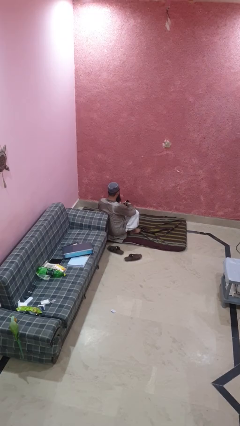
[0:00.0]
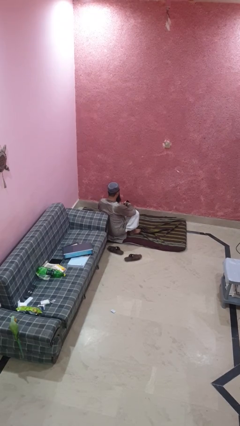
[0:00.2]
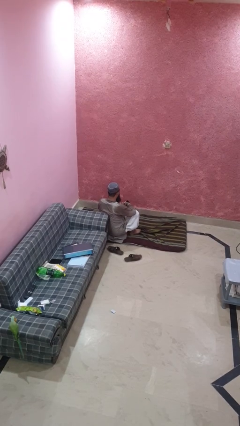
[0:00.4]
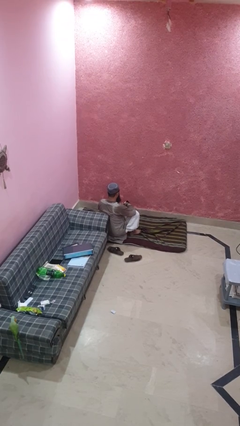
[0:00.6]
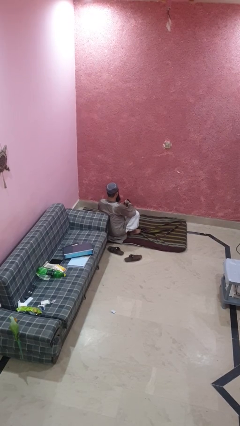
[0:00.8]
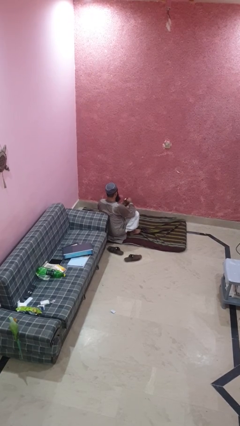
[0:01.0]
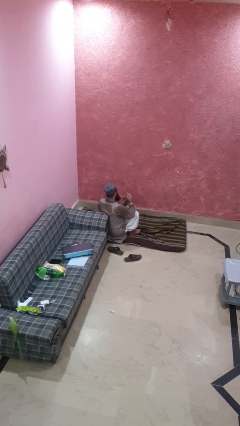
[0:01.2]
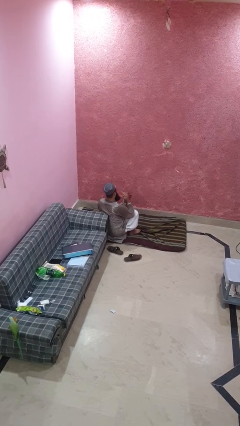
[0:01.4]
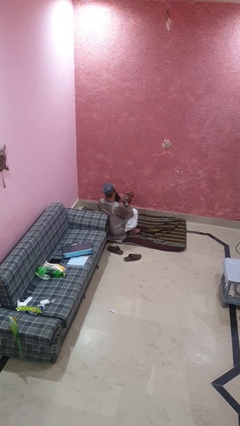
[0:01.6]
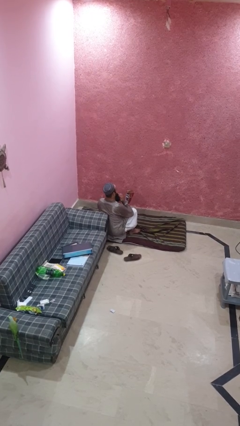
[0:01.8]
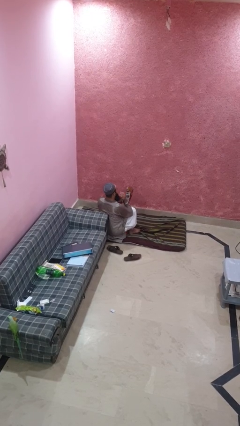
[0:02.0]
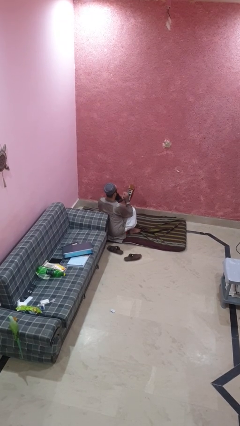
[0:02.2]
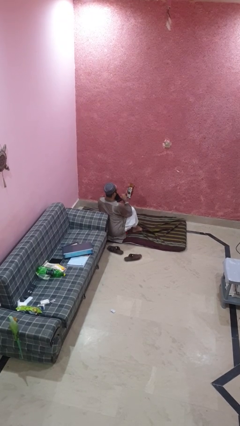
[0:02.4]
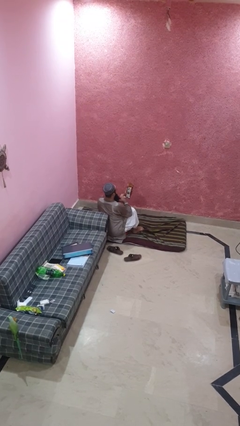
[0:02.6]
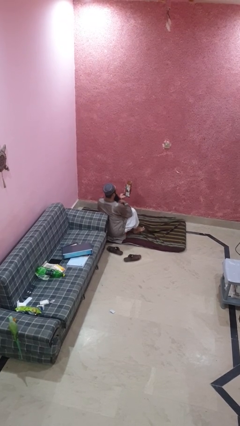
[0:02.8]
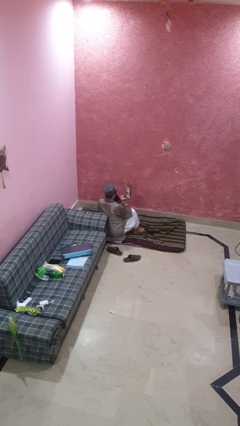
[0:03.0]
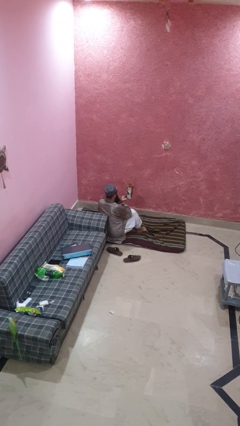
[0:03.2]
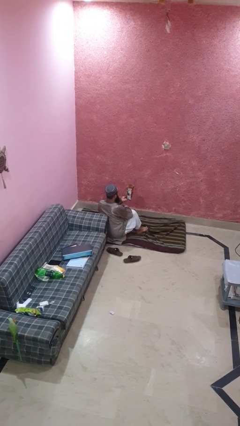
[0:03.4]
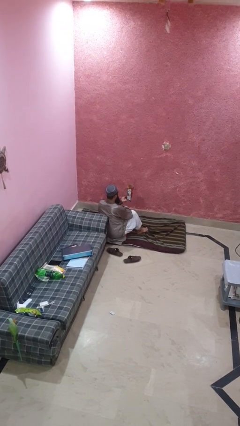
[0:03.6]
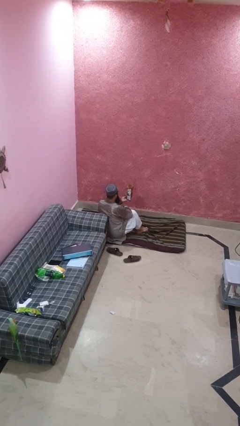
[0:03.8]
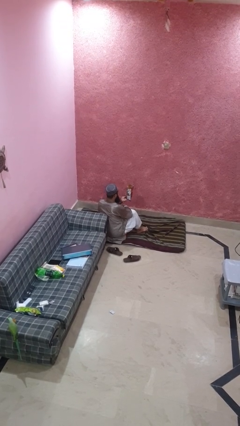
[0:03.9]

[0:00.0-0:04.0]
person eats snack from bag

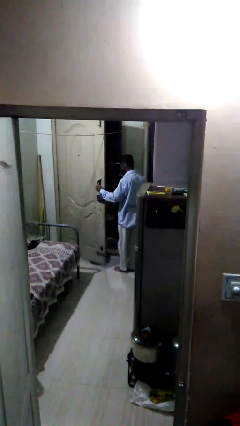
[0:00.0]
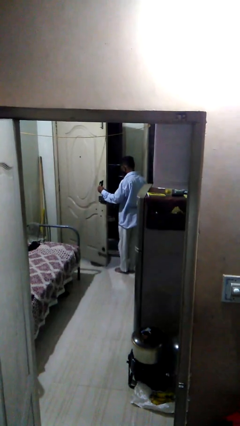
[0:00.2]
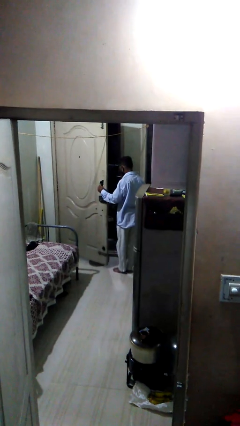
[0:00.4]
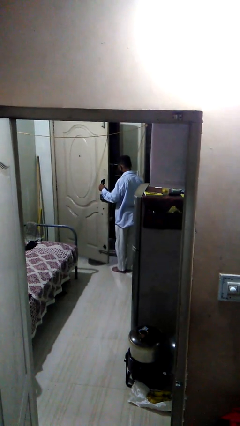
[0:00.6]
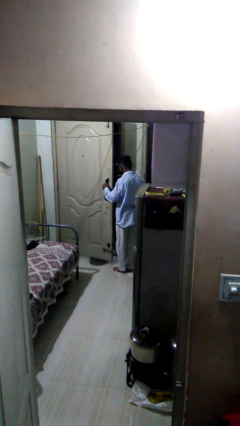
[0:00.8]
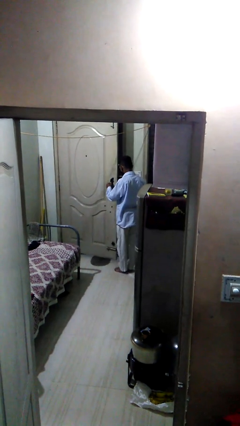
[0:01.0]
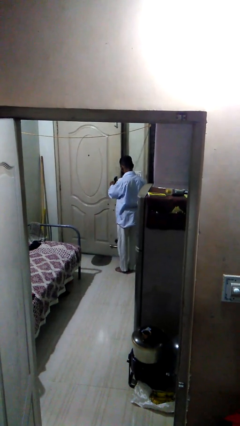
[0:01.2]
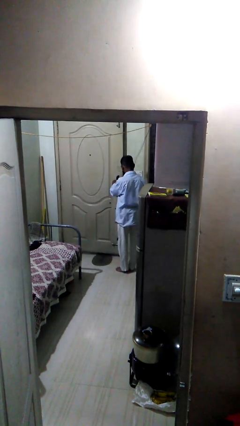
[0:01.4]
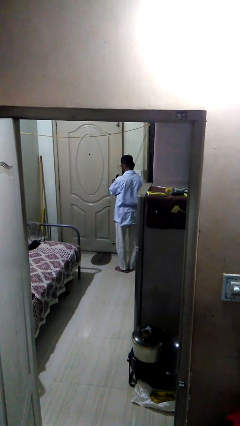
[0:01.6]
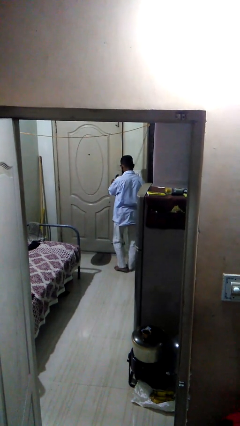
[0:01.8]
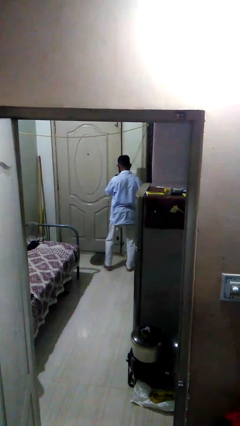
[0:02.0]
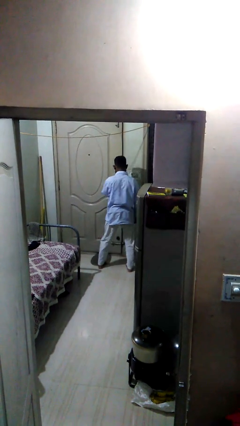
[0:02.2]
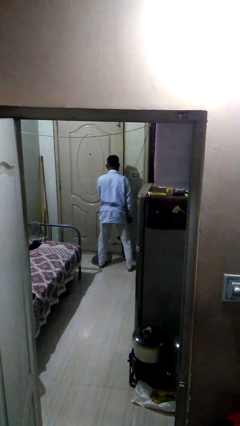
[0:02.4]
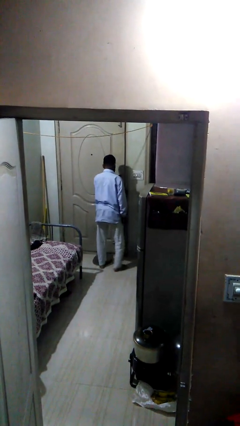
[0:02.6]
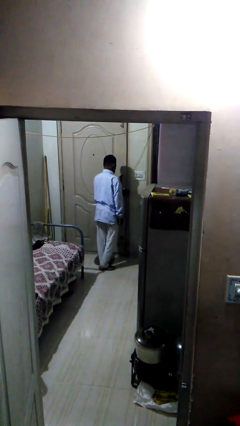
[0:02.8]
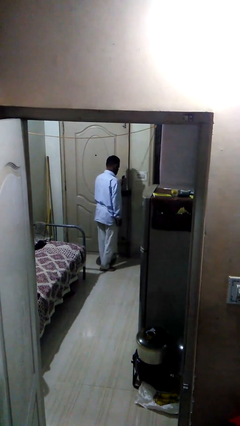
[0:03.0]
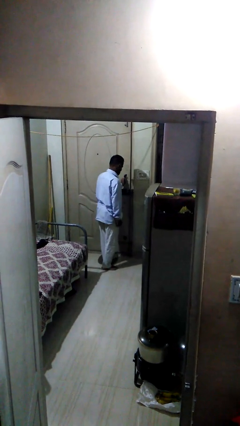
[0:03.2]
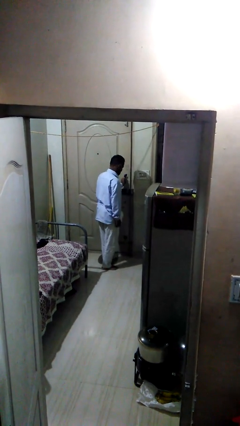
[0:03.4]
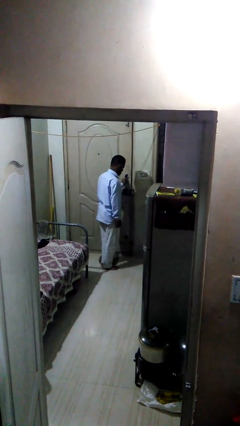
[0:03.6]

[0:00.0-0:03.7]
person closes facility door

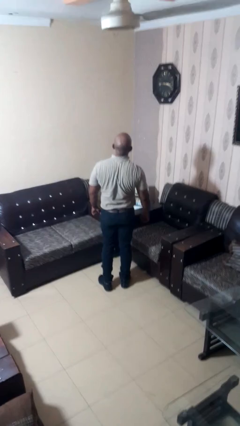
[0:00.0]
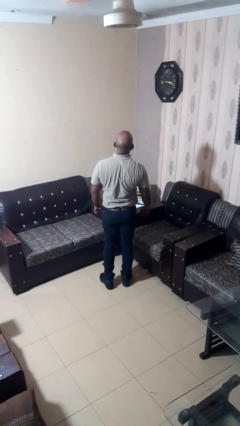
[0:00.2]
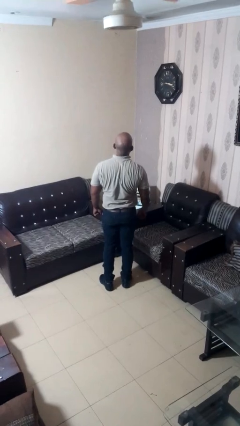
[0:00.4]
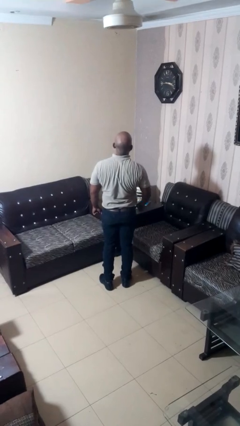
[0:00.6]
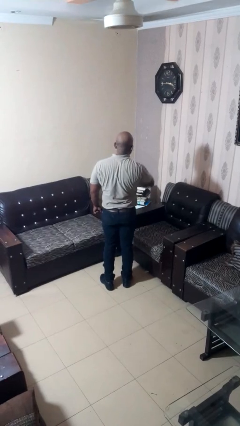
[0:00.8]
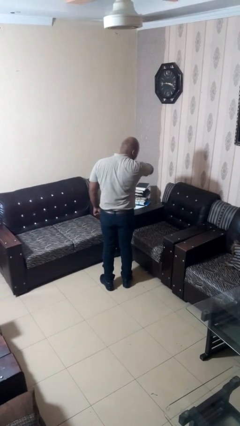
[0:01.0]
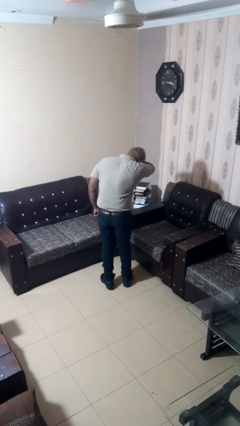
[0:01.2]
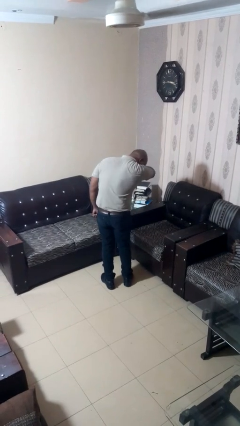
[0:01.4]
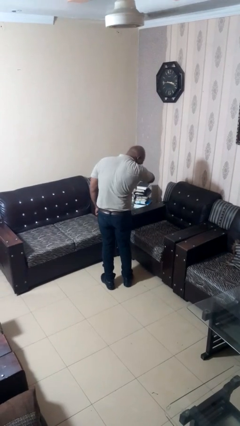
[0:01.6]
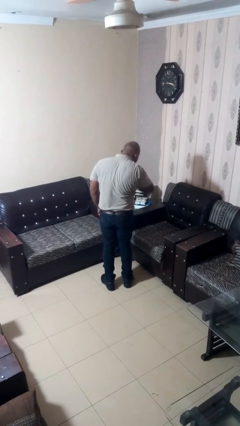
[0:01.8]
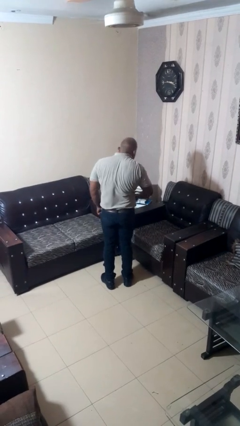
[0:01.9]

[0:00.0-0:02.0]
person sneezes into arm

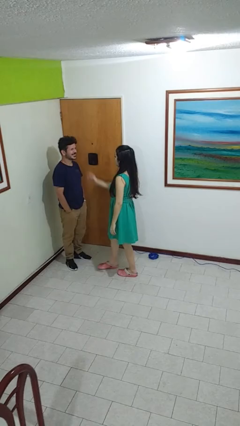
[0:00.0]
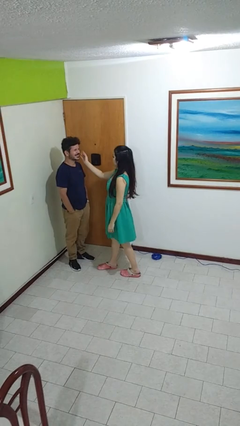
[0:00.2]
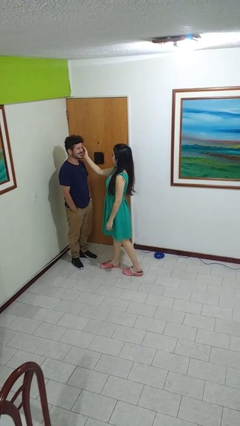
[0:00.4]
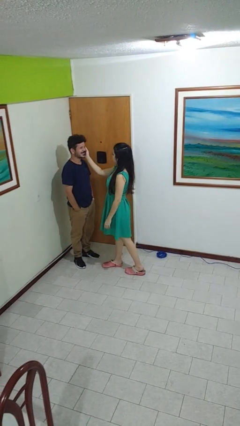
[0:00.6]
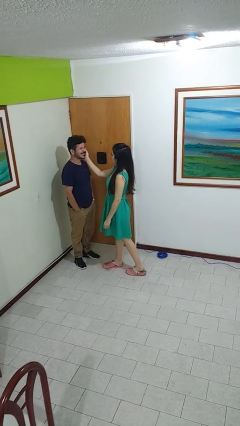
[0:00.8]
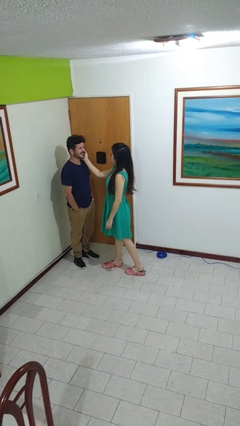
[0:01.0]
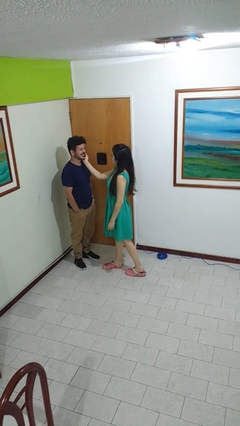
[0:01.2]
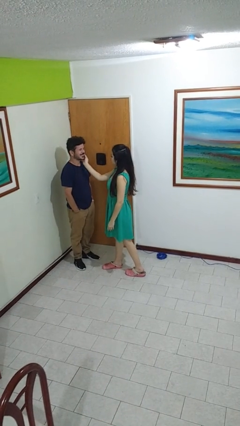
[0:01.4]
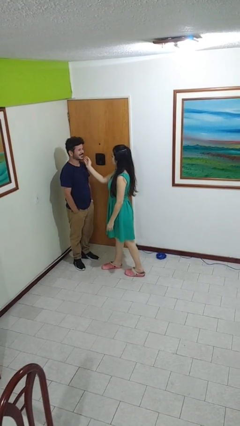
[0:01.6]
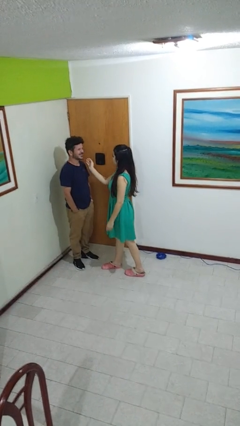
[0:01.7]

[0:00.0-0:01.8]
person touches face of person

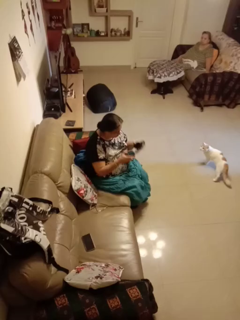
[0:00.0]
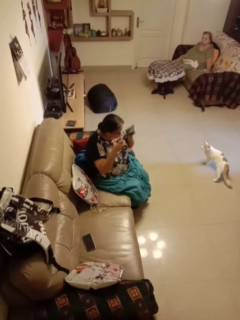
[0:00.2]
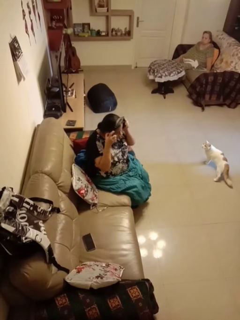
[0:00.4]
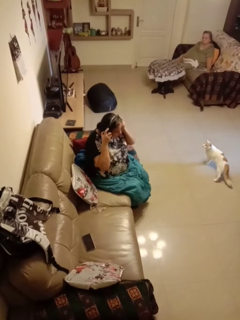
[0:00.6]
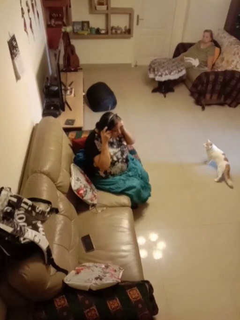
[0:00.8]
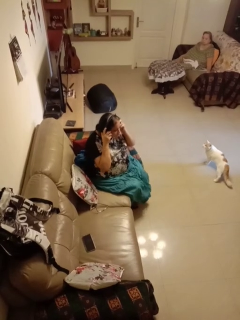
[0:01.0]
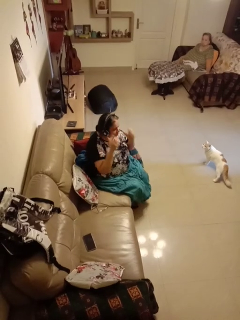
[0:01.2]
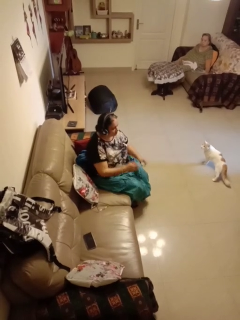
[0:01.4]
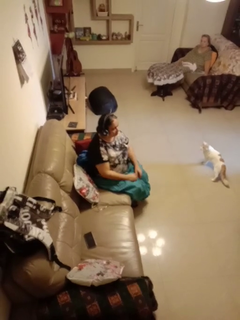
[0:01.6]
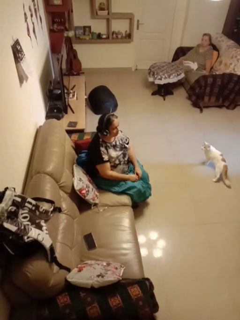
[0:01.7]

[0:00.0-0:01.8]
person puts on headphones

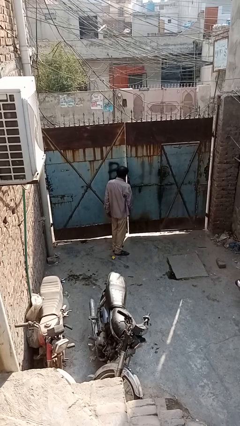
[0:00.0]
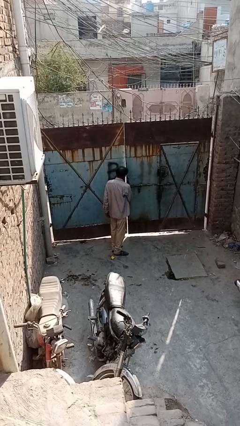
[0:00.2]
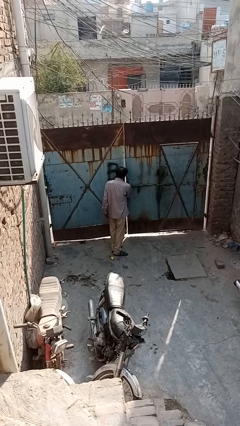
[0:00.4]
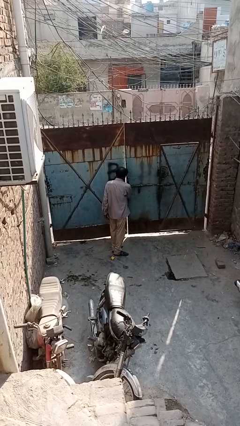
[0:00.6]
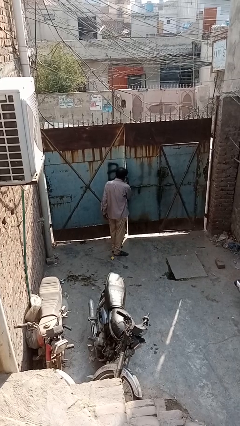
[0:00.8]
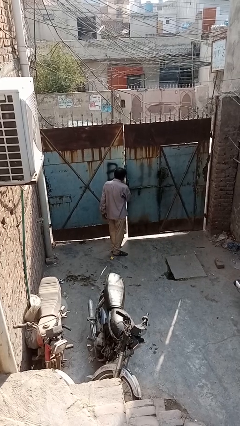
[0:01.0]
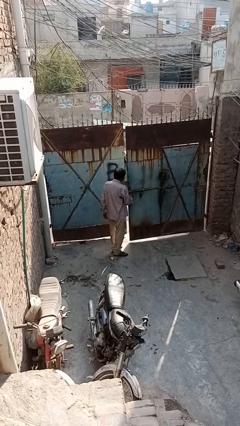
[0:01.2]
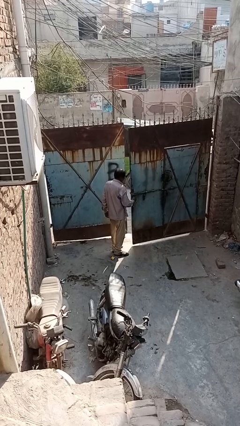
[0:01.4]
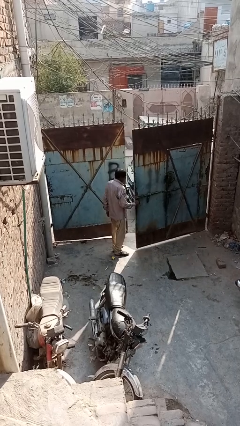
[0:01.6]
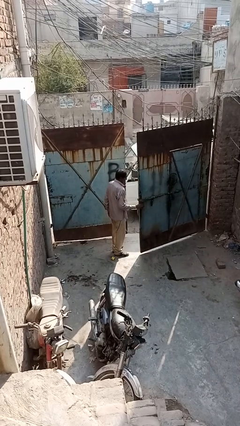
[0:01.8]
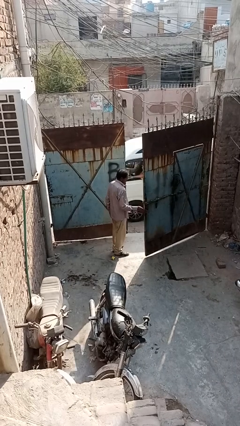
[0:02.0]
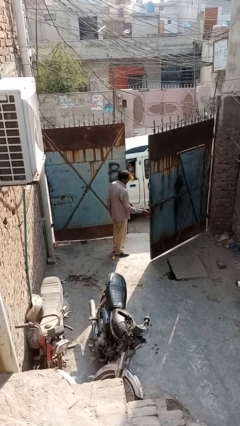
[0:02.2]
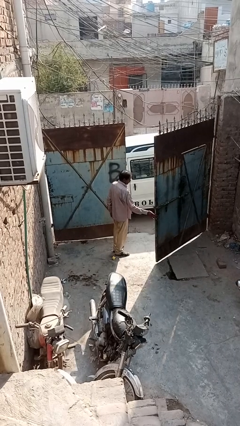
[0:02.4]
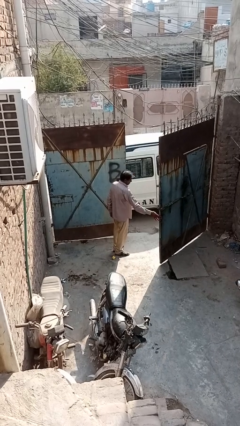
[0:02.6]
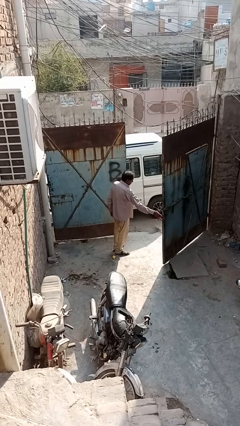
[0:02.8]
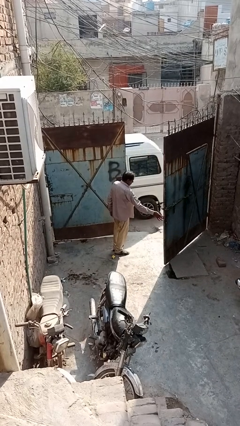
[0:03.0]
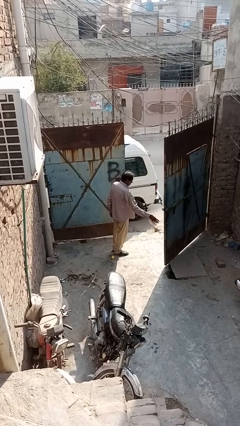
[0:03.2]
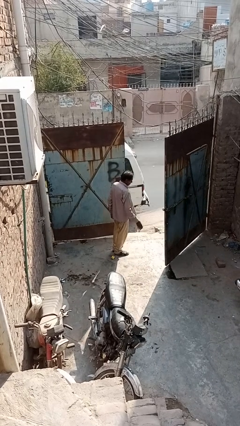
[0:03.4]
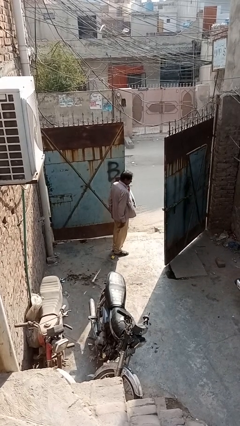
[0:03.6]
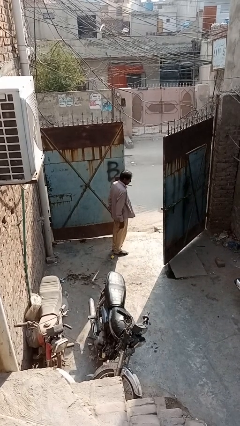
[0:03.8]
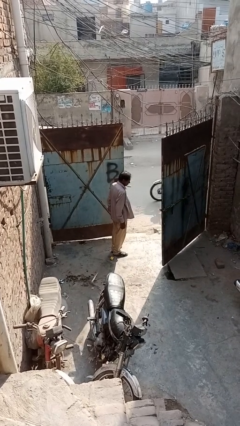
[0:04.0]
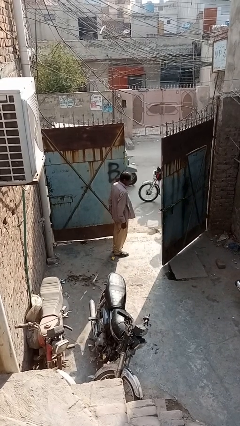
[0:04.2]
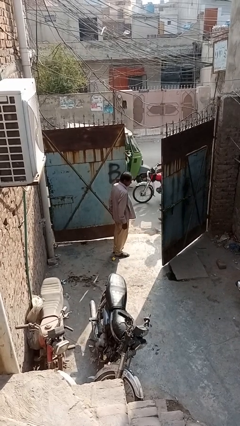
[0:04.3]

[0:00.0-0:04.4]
person opens gate

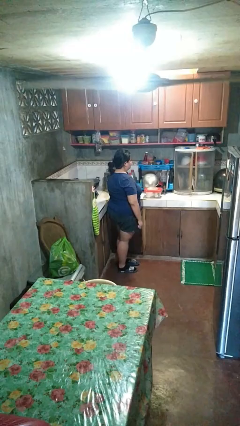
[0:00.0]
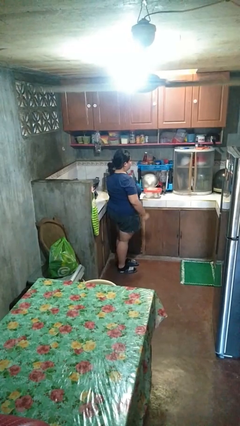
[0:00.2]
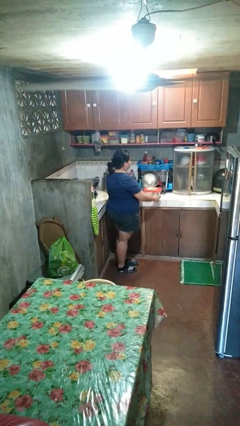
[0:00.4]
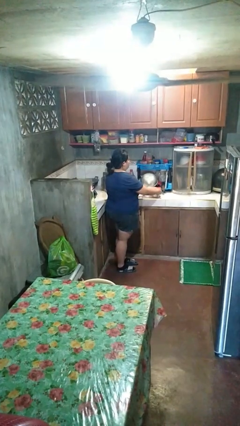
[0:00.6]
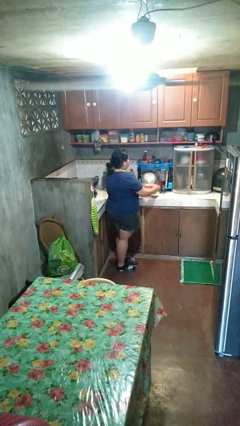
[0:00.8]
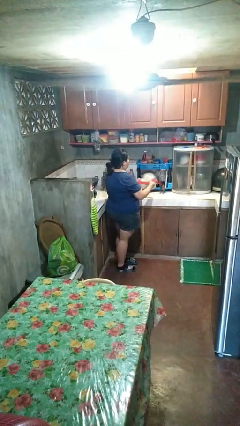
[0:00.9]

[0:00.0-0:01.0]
person picks up object from countertop
